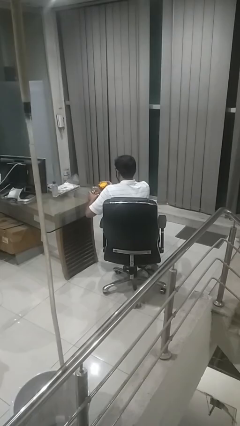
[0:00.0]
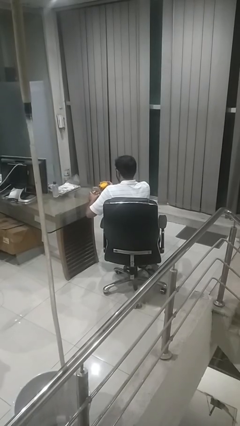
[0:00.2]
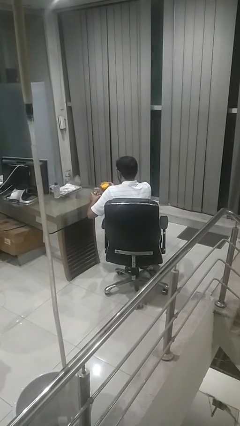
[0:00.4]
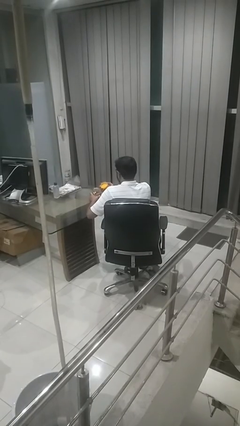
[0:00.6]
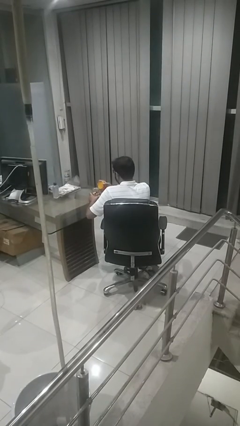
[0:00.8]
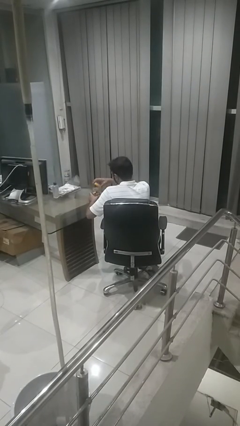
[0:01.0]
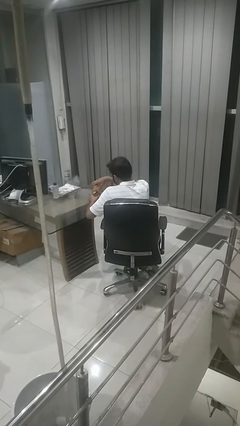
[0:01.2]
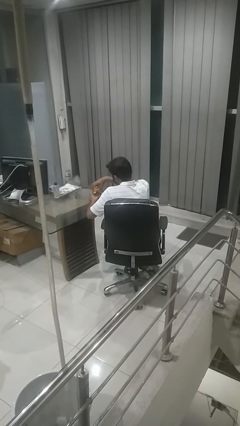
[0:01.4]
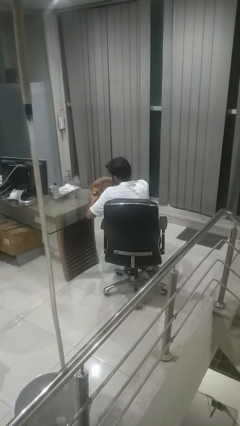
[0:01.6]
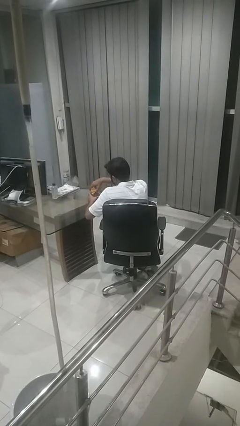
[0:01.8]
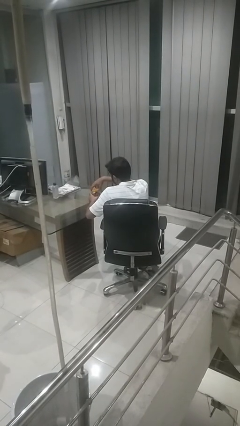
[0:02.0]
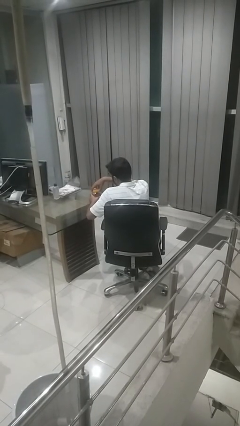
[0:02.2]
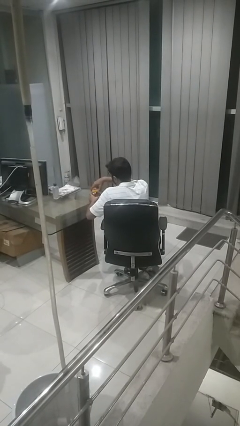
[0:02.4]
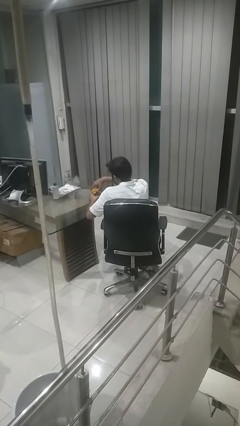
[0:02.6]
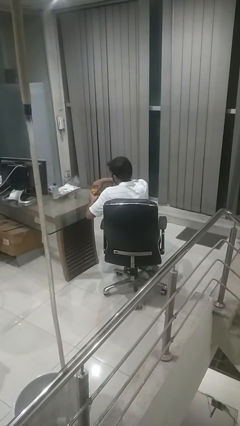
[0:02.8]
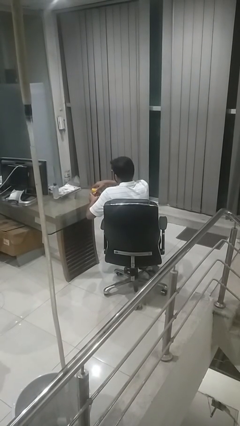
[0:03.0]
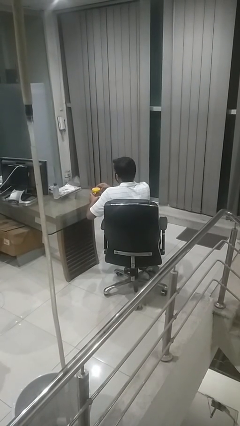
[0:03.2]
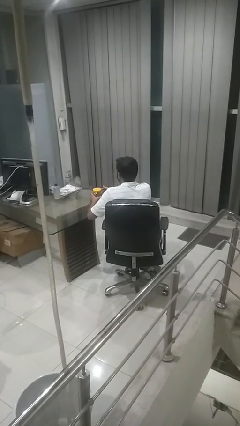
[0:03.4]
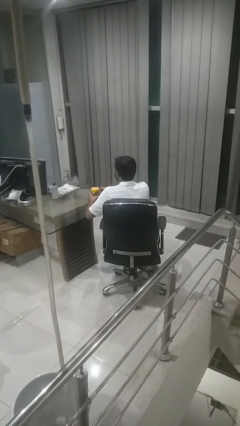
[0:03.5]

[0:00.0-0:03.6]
person closes jar

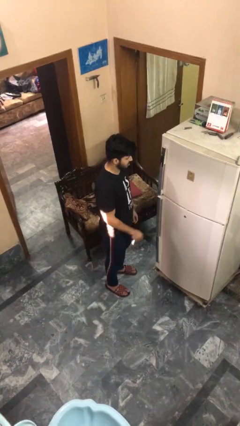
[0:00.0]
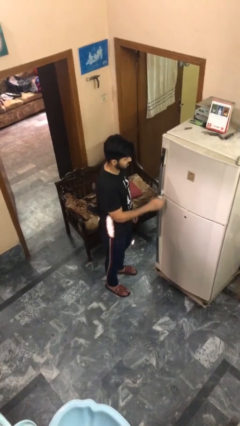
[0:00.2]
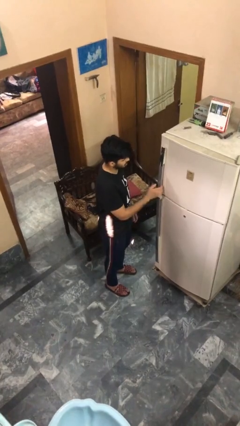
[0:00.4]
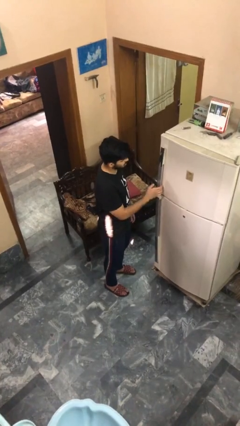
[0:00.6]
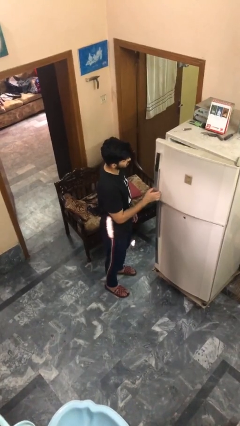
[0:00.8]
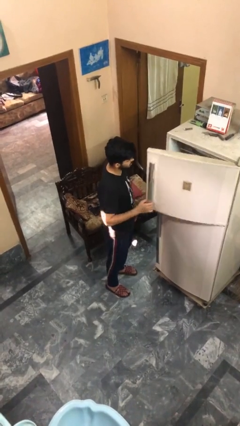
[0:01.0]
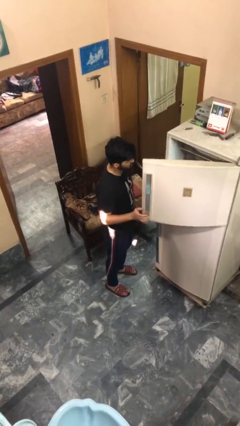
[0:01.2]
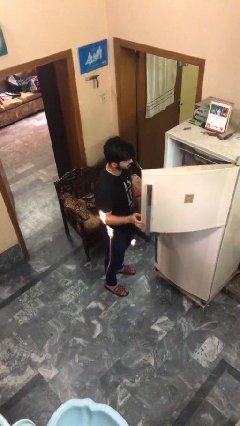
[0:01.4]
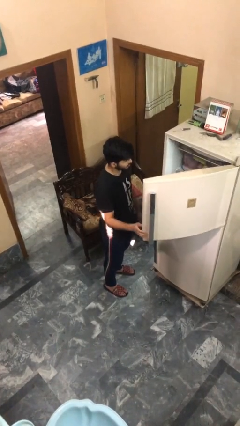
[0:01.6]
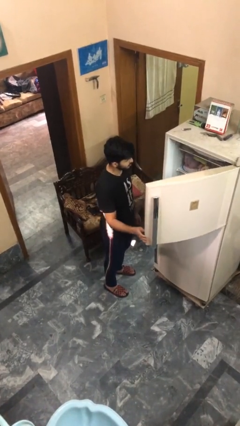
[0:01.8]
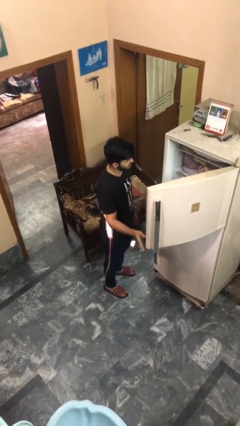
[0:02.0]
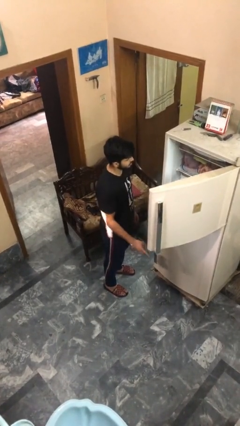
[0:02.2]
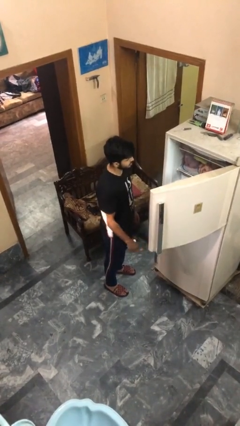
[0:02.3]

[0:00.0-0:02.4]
person opens refrigerator

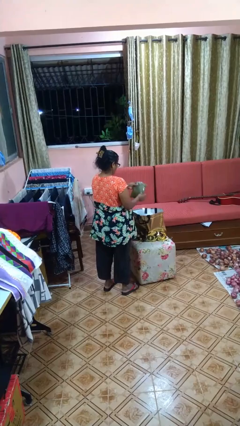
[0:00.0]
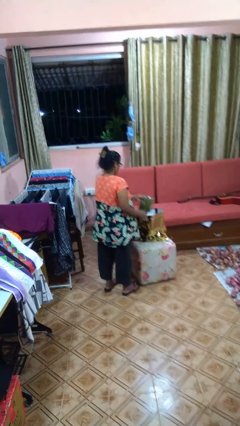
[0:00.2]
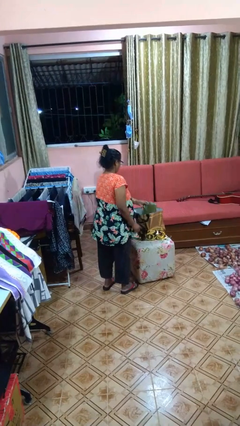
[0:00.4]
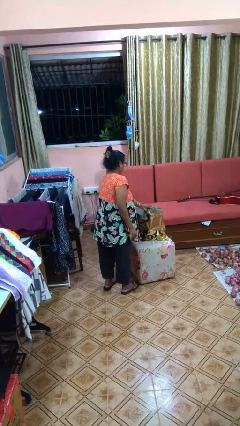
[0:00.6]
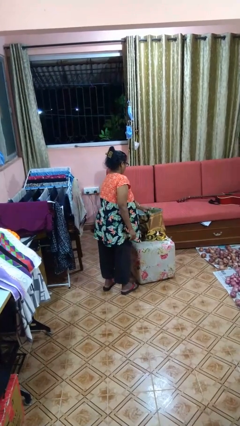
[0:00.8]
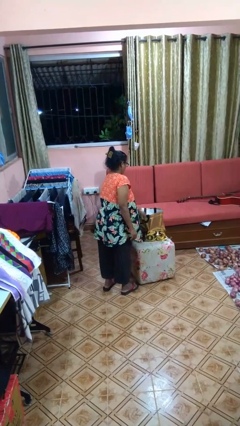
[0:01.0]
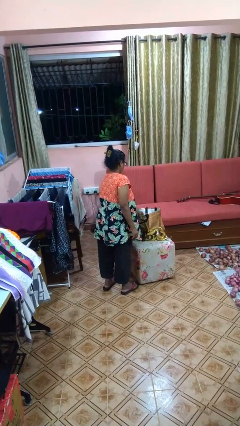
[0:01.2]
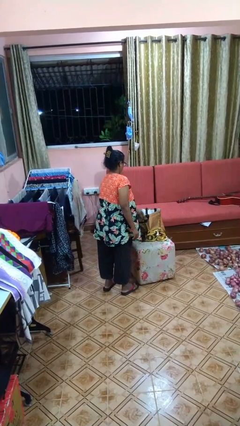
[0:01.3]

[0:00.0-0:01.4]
person puts object into bag

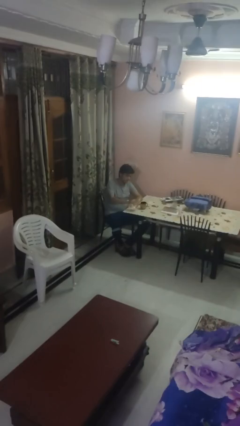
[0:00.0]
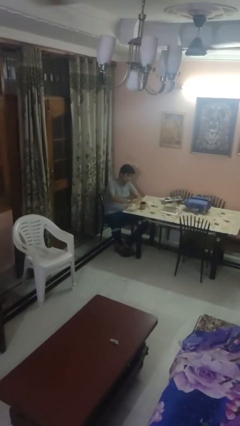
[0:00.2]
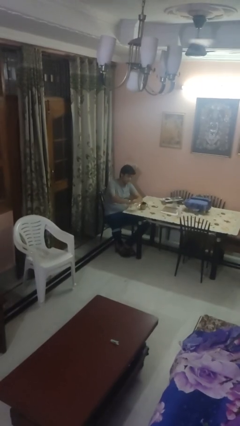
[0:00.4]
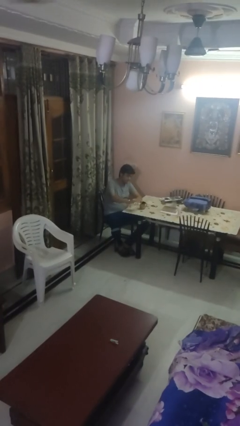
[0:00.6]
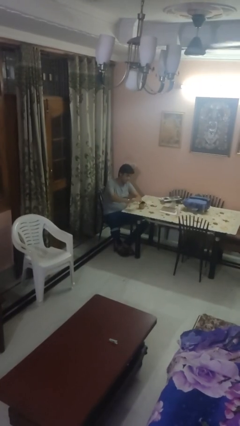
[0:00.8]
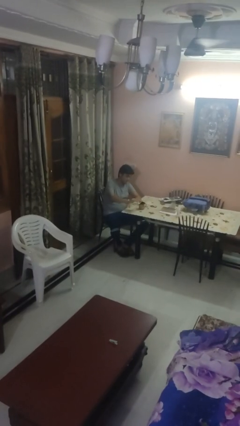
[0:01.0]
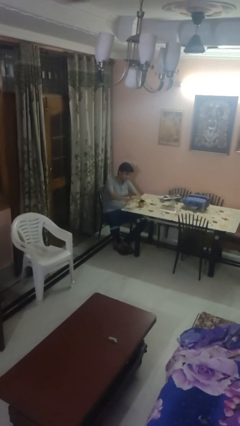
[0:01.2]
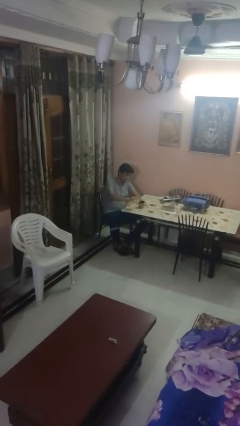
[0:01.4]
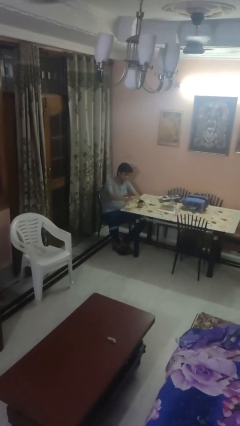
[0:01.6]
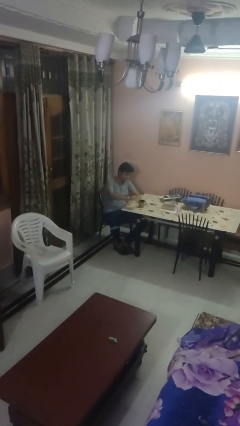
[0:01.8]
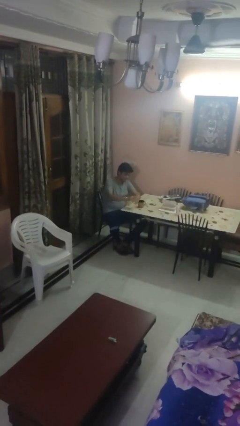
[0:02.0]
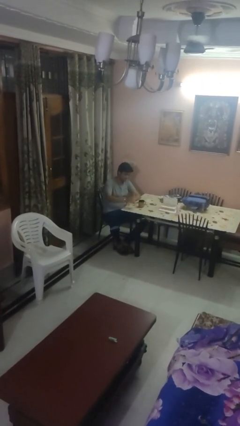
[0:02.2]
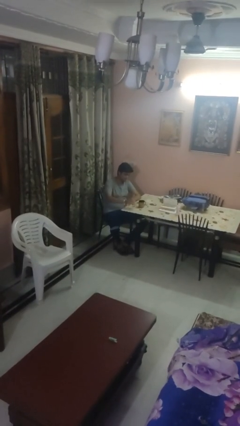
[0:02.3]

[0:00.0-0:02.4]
person pours liquid into cup

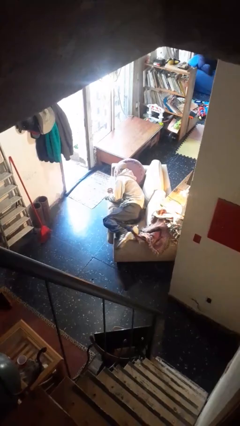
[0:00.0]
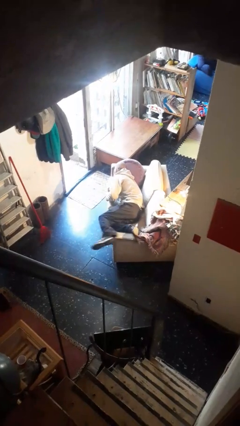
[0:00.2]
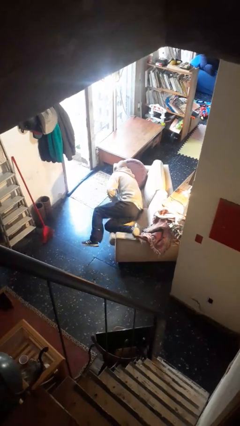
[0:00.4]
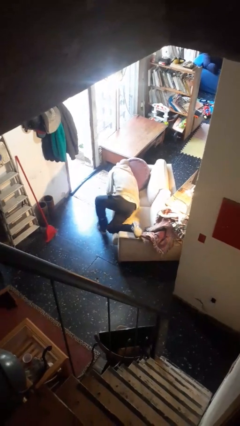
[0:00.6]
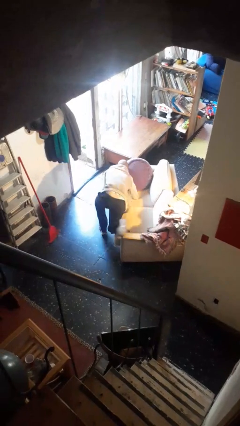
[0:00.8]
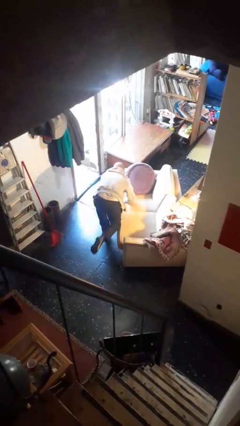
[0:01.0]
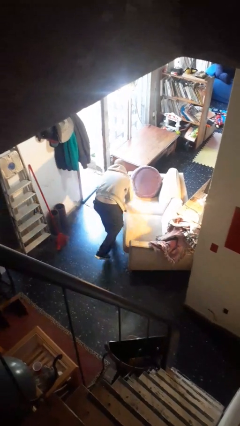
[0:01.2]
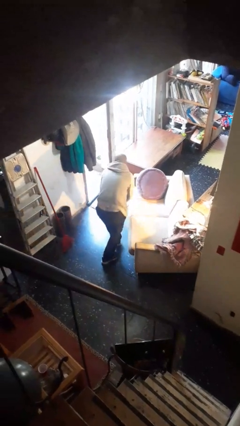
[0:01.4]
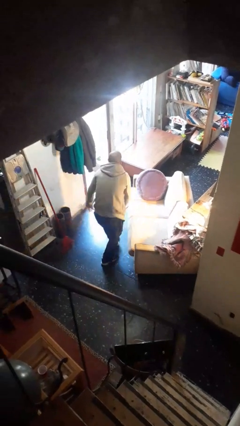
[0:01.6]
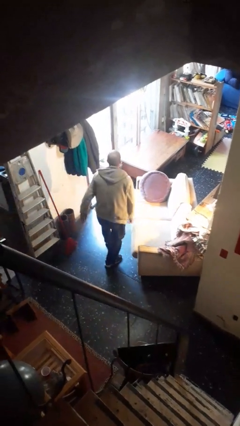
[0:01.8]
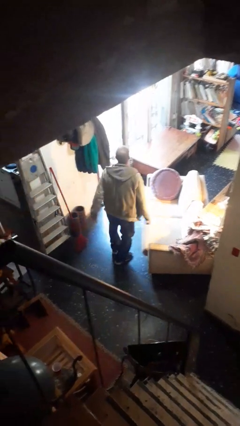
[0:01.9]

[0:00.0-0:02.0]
person stands up

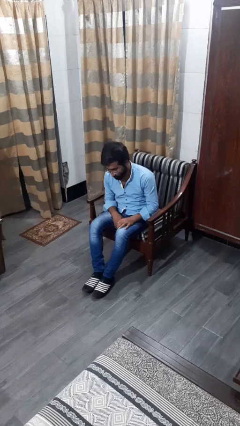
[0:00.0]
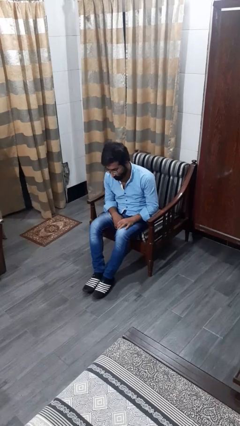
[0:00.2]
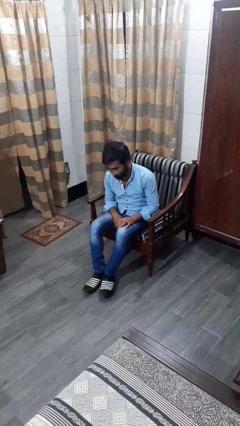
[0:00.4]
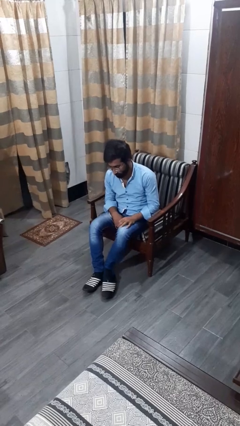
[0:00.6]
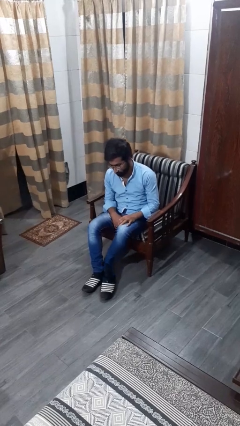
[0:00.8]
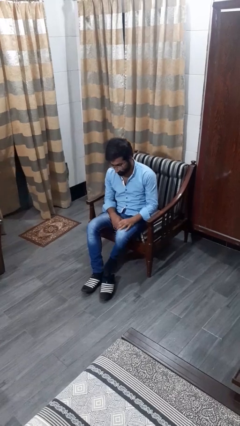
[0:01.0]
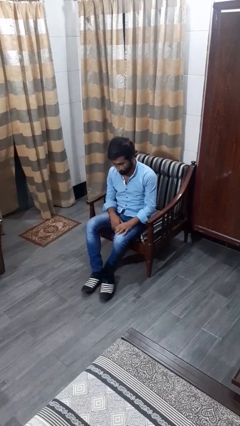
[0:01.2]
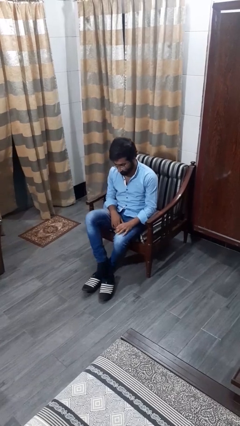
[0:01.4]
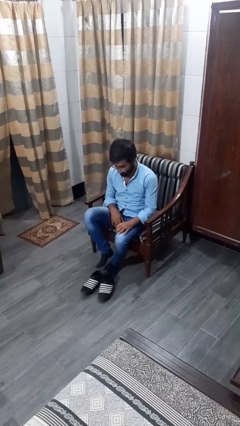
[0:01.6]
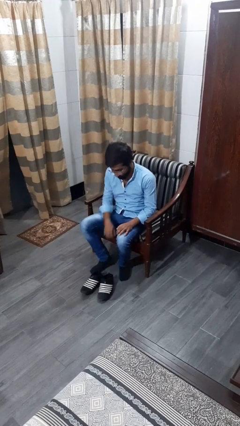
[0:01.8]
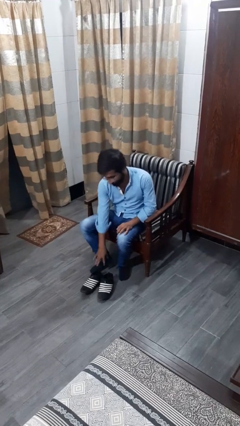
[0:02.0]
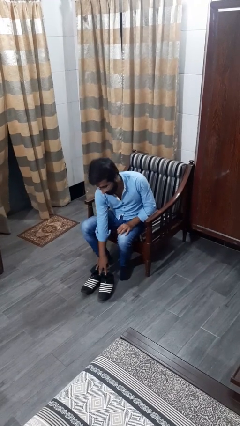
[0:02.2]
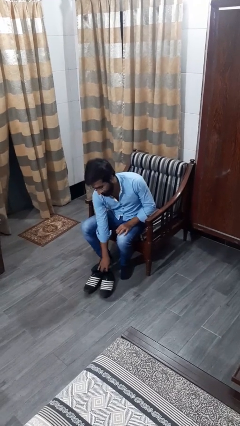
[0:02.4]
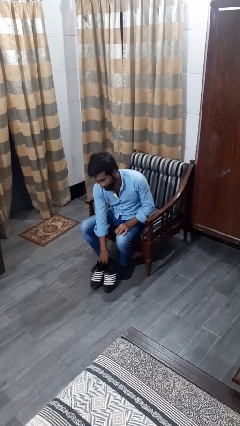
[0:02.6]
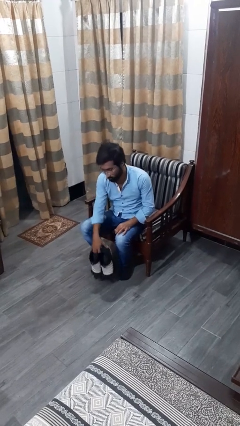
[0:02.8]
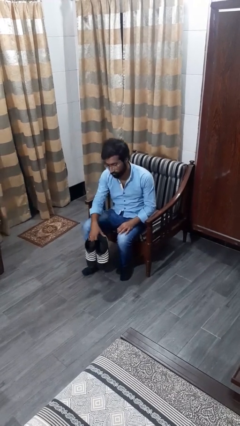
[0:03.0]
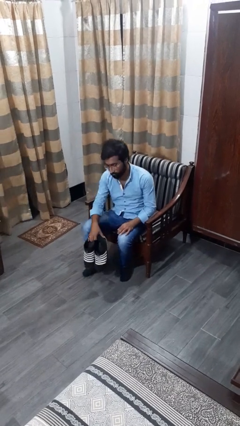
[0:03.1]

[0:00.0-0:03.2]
person takes off shoes

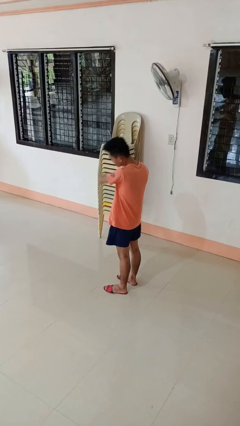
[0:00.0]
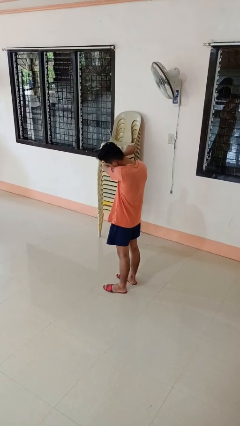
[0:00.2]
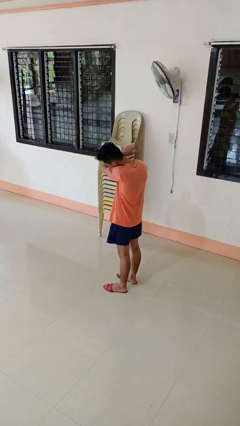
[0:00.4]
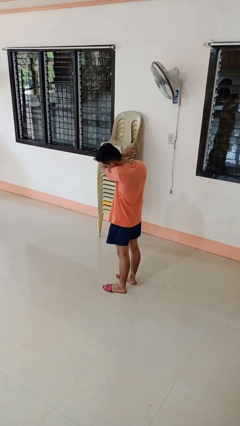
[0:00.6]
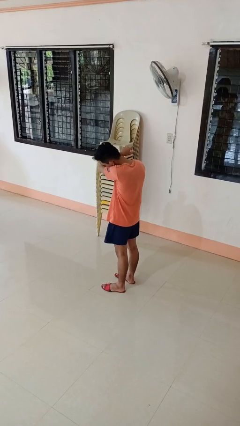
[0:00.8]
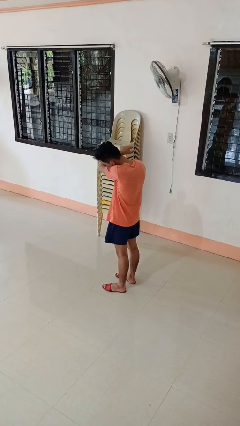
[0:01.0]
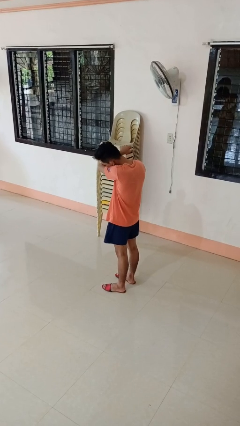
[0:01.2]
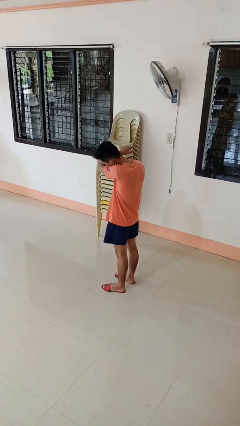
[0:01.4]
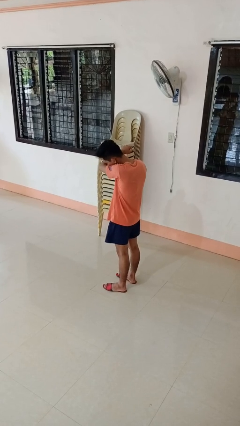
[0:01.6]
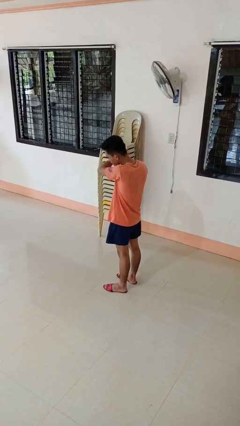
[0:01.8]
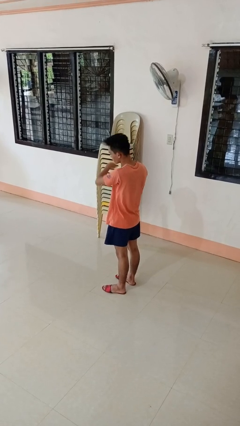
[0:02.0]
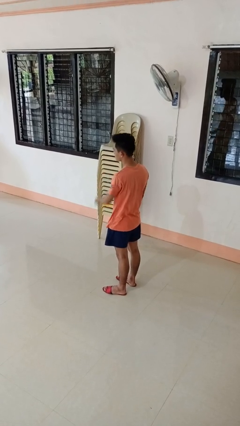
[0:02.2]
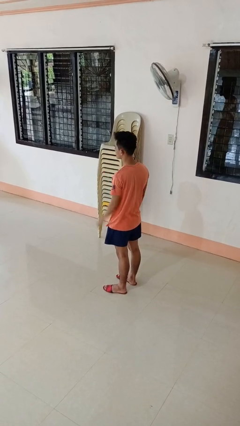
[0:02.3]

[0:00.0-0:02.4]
person sneezes into arm
